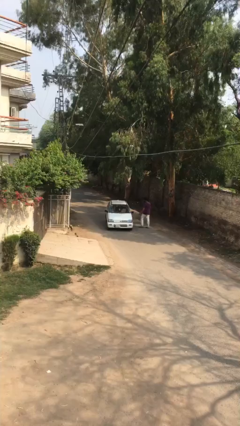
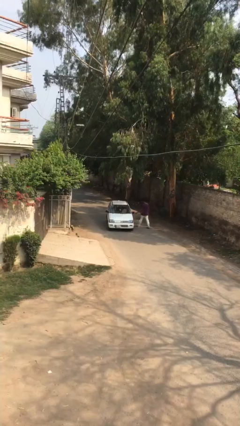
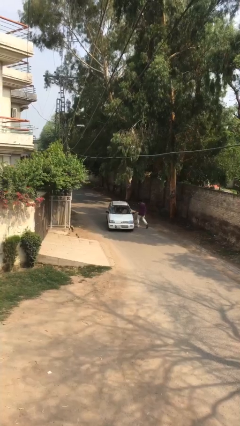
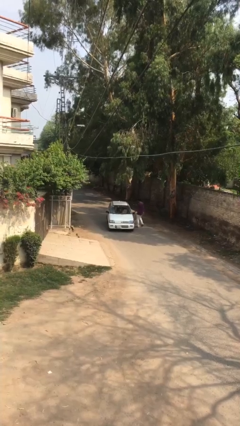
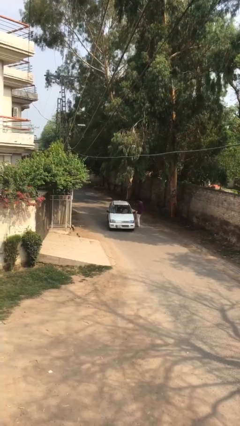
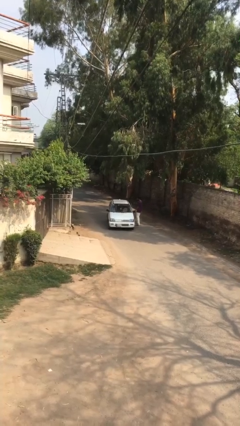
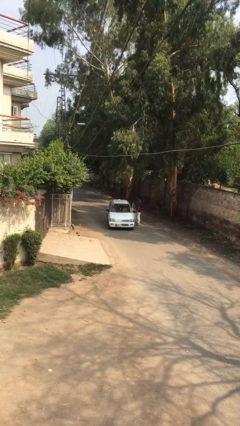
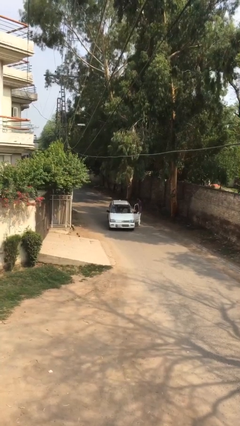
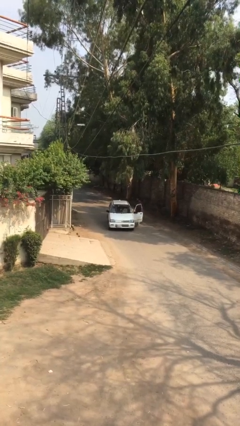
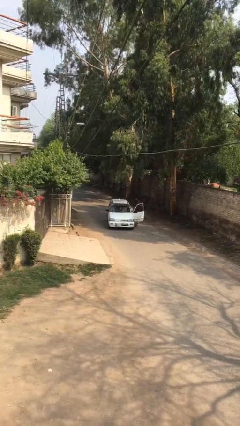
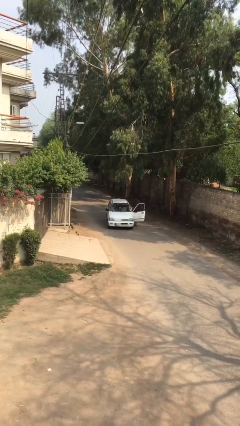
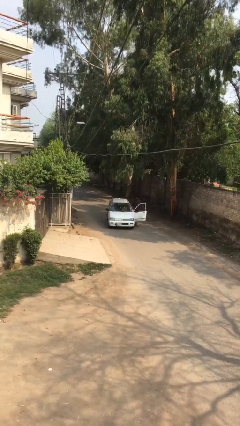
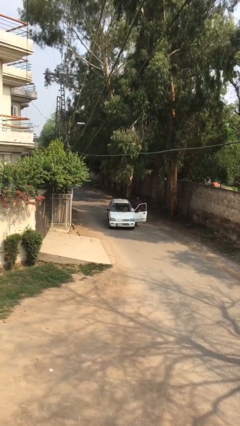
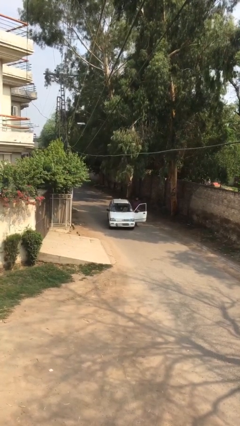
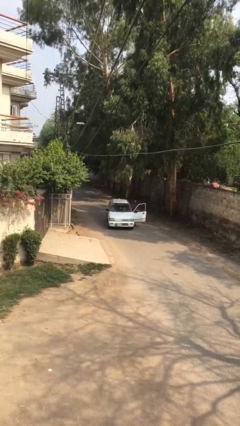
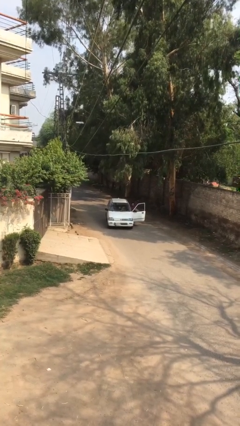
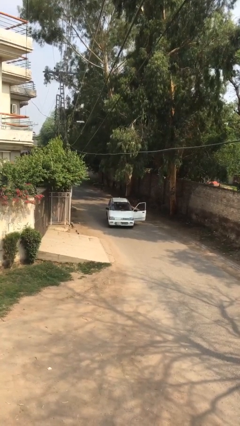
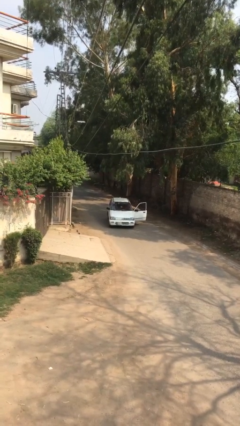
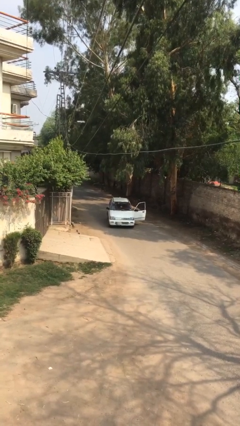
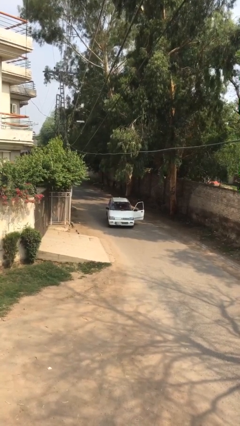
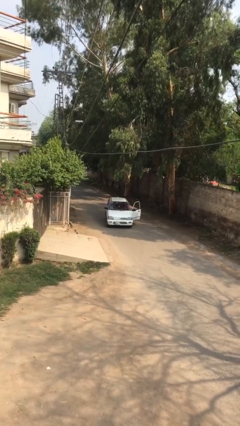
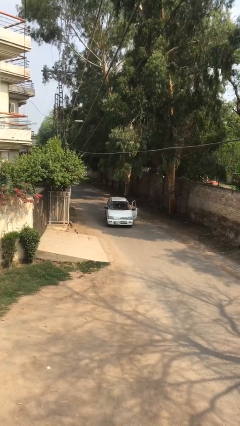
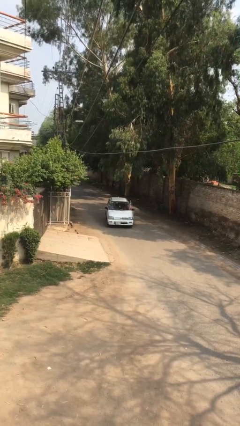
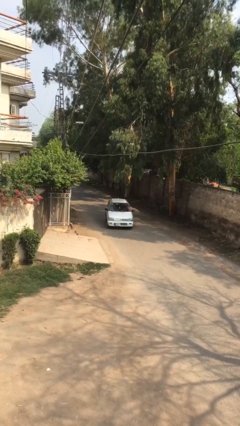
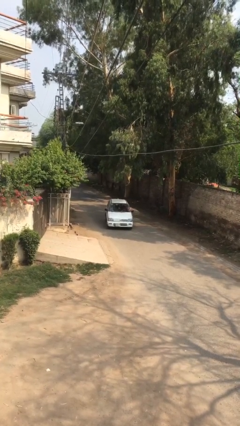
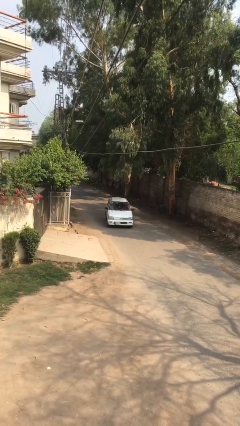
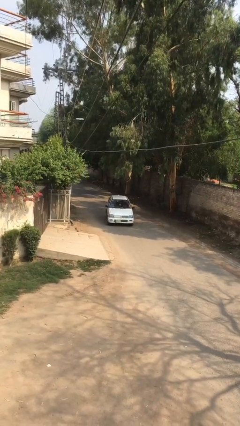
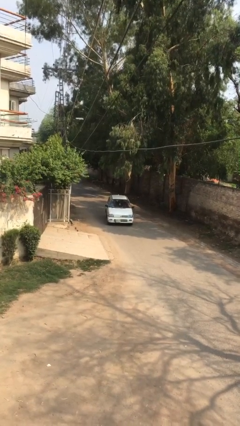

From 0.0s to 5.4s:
car picks up person

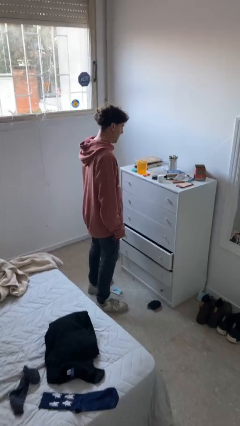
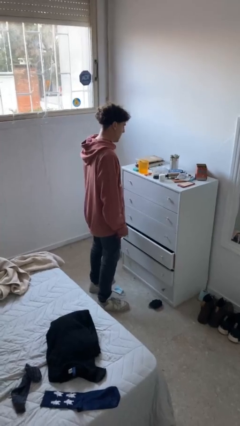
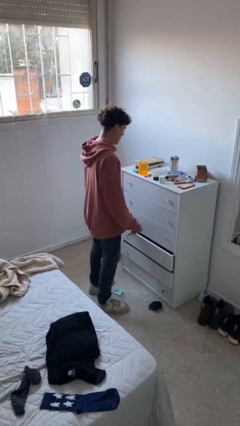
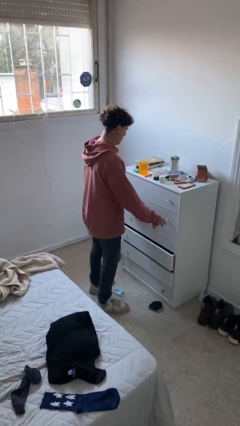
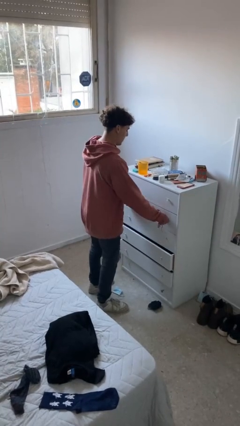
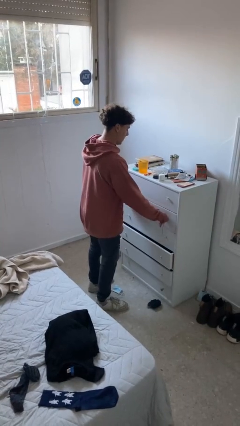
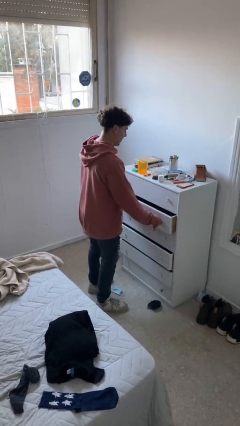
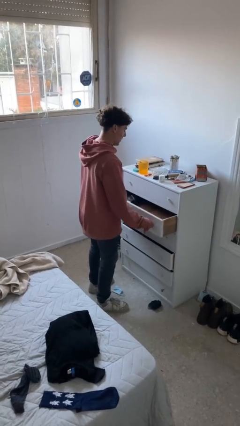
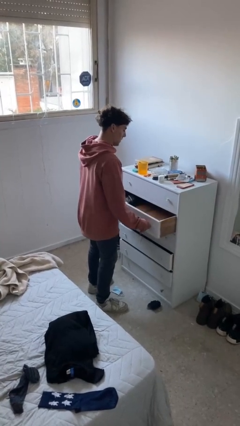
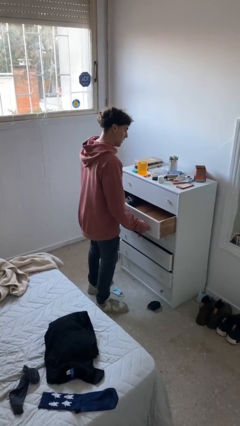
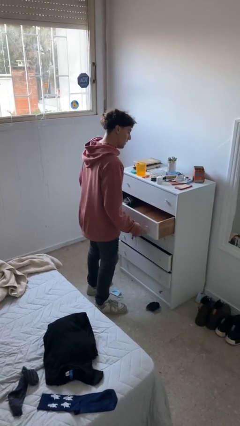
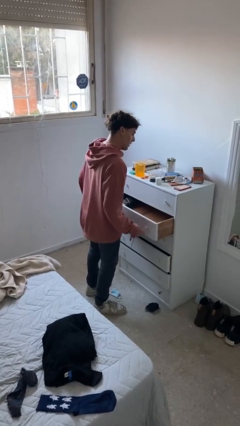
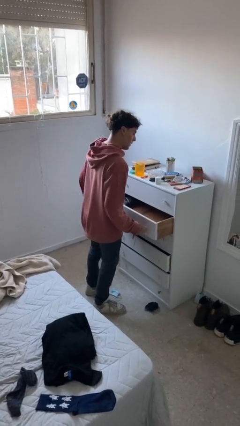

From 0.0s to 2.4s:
person opens dresser drawer

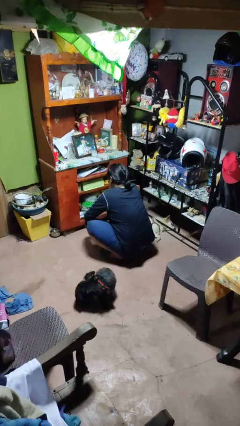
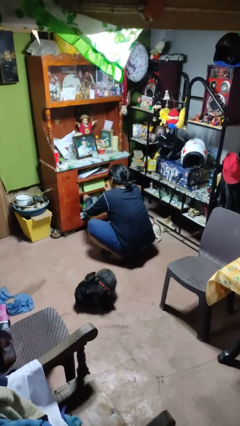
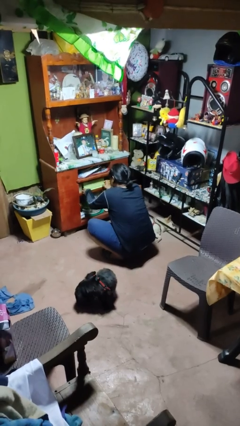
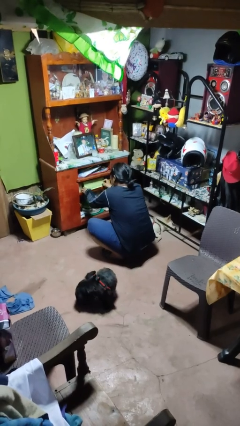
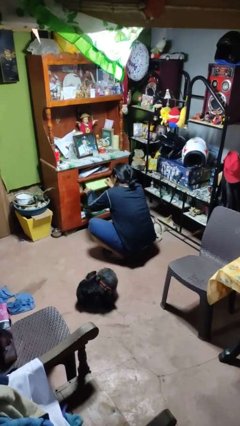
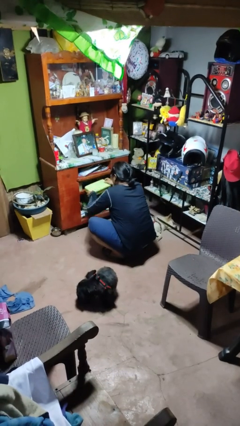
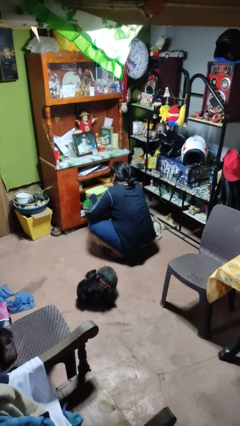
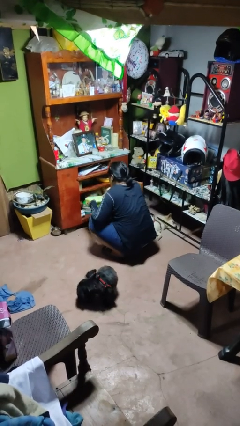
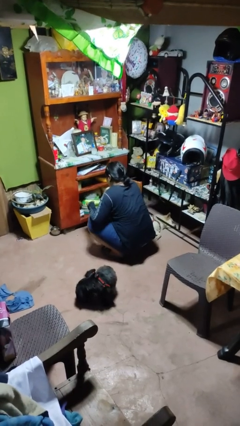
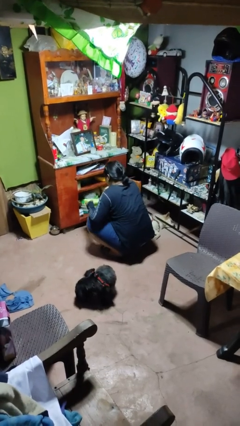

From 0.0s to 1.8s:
person picks up object from cabinet

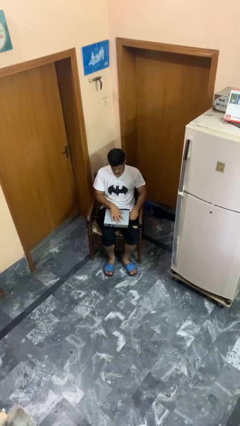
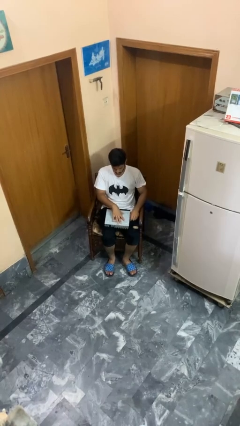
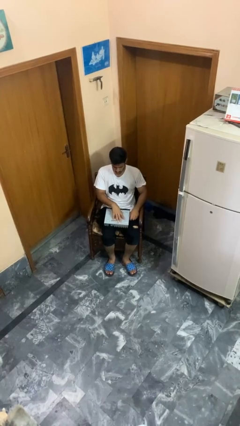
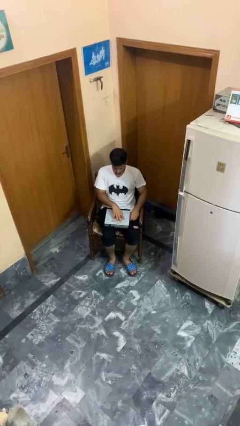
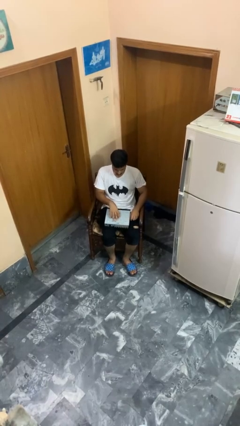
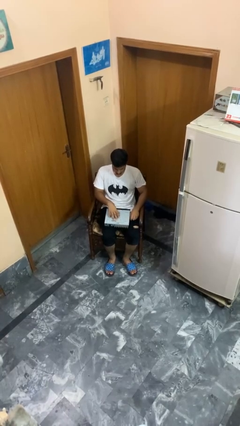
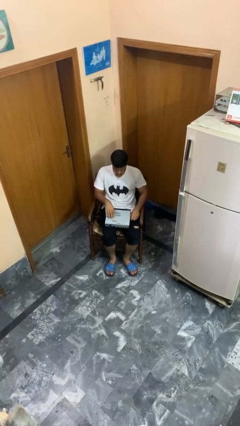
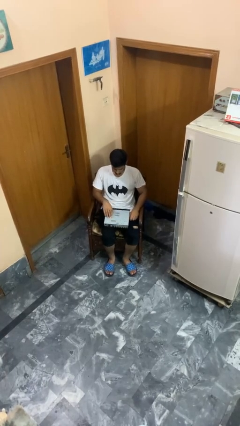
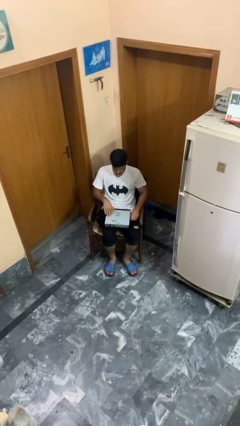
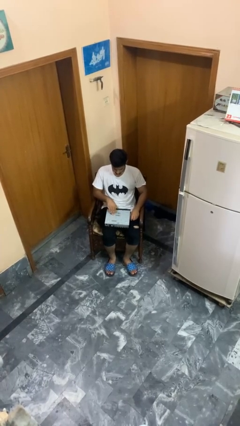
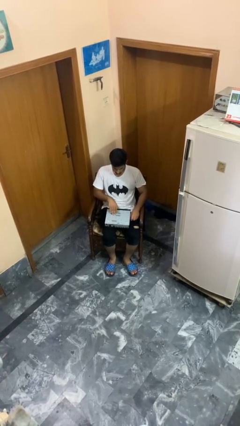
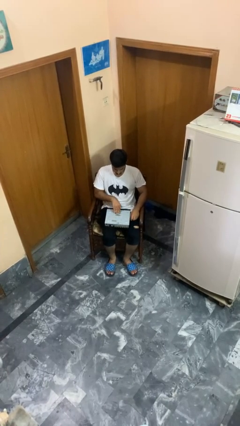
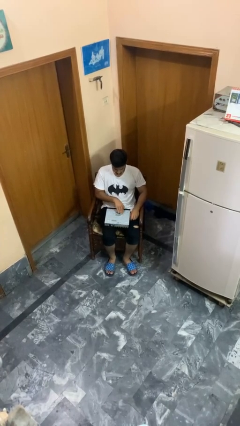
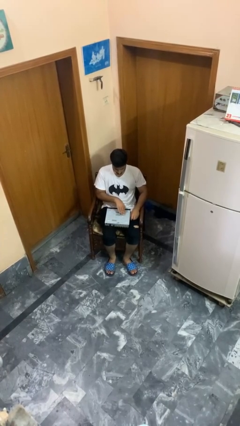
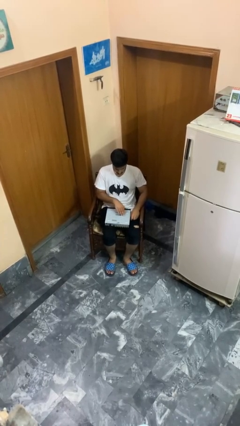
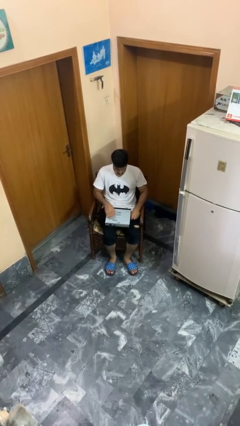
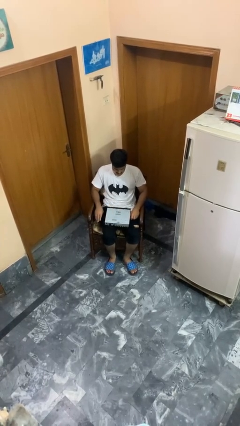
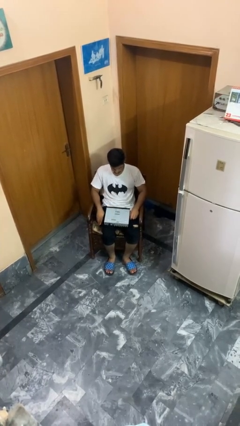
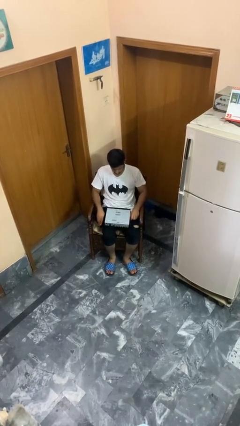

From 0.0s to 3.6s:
person taps object with finger

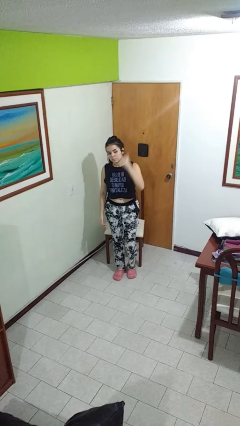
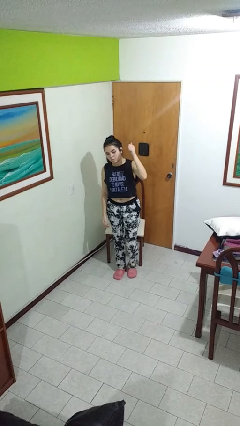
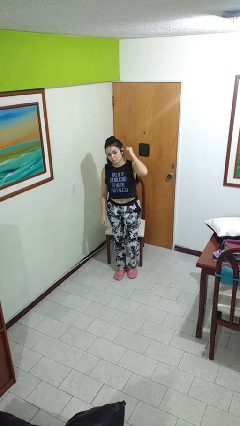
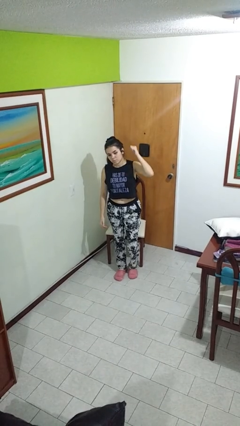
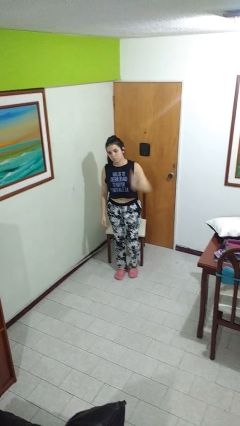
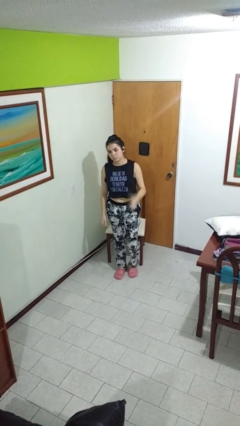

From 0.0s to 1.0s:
person gestures behind me

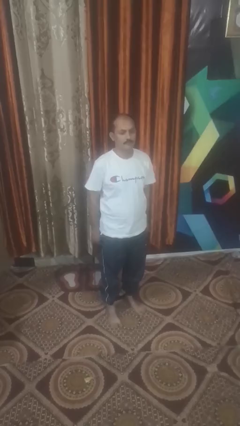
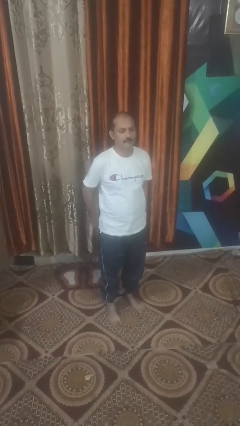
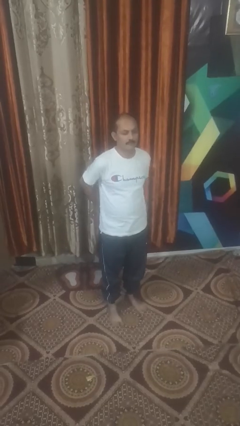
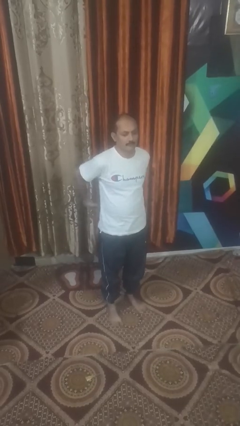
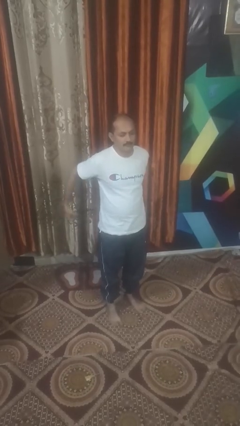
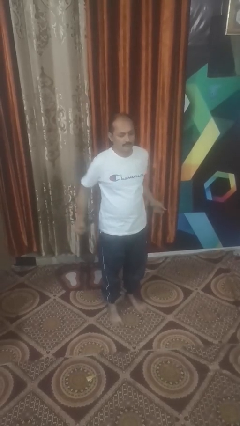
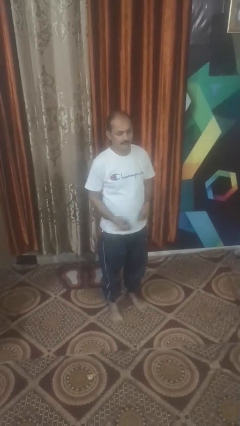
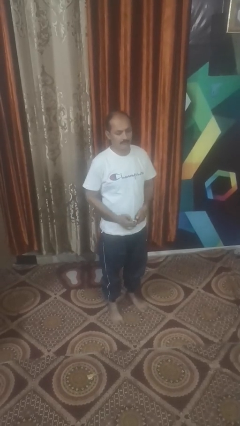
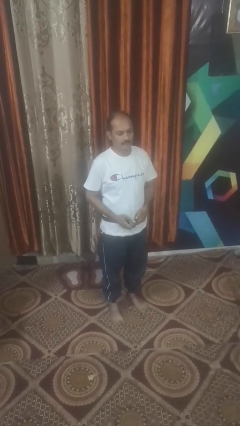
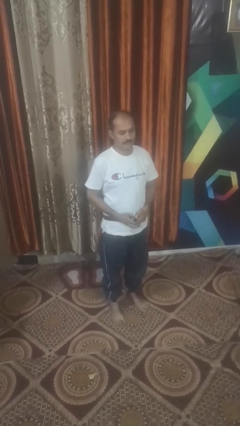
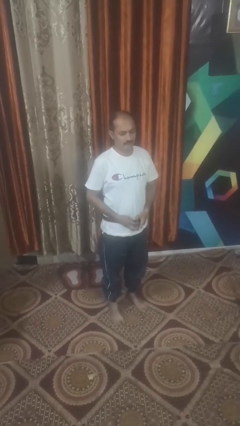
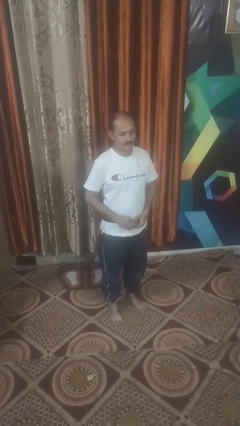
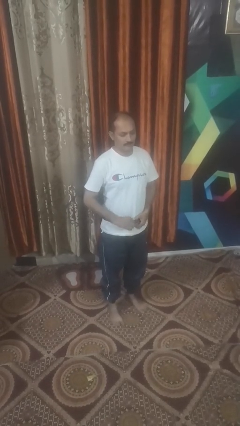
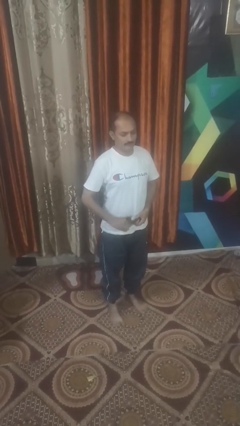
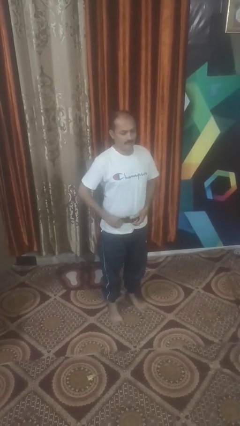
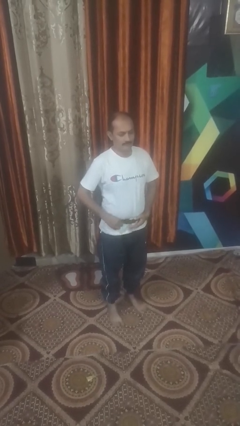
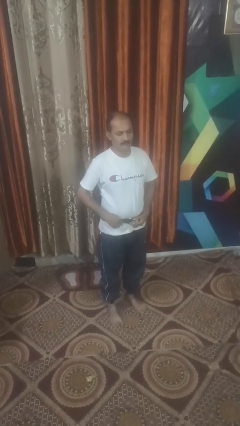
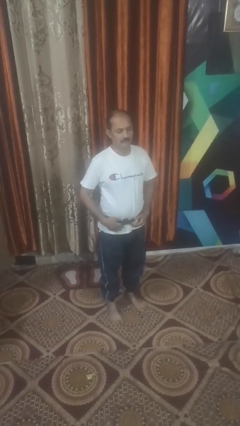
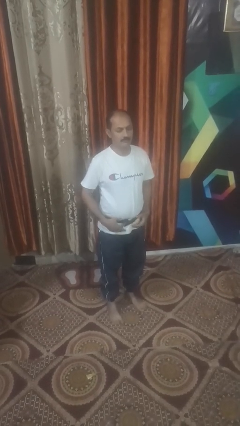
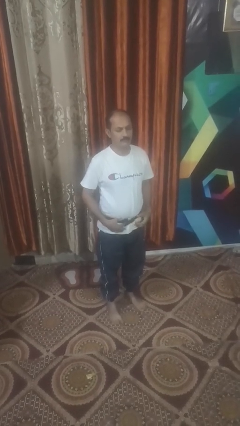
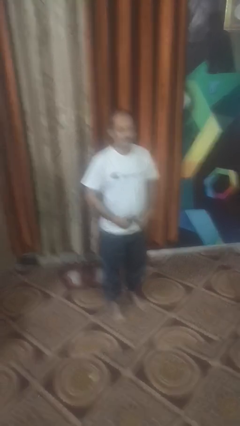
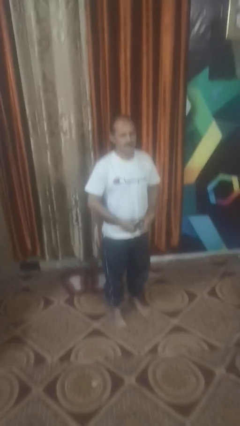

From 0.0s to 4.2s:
person puts on belt
